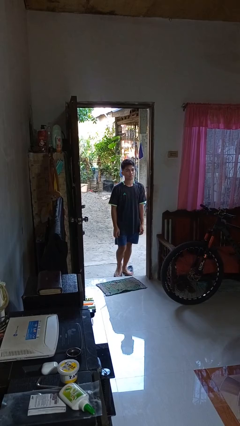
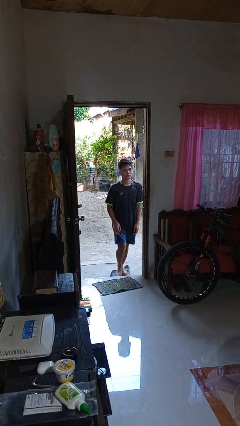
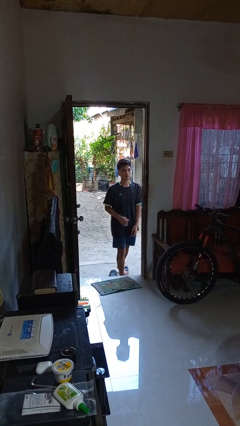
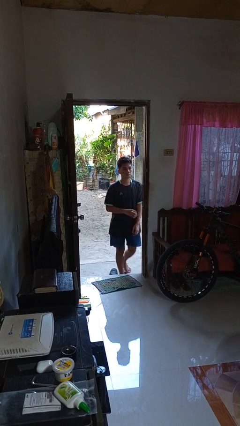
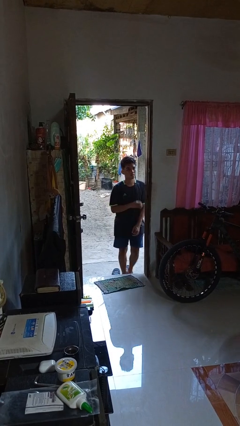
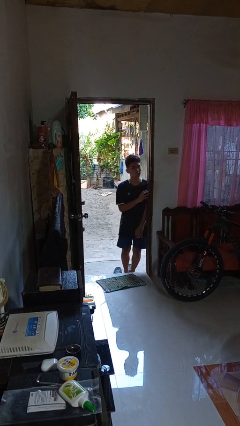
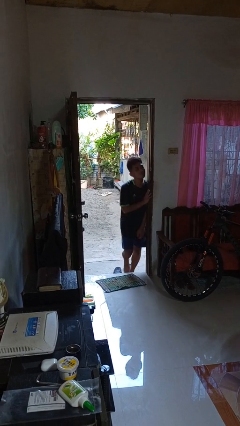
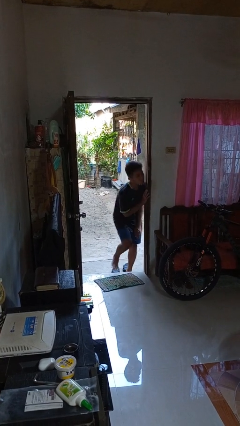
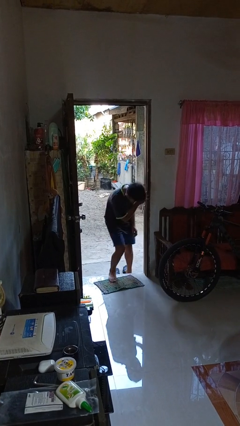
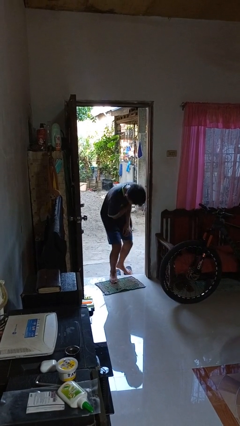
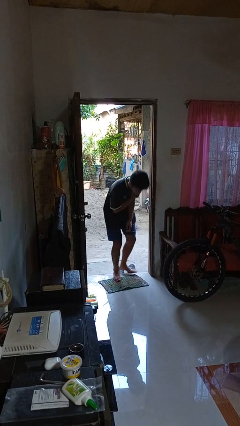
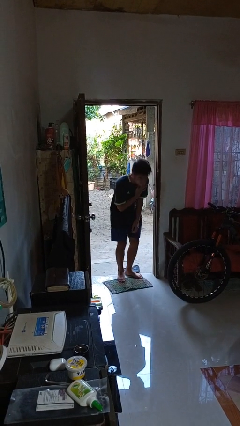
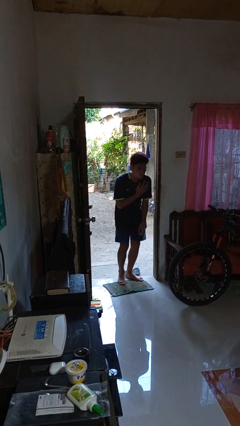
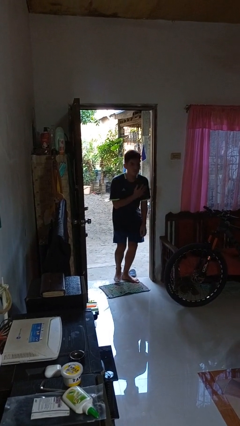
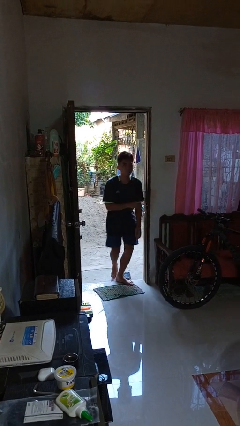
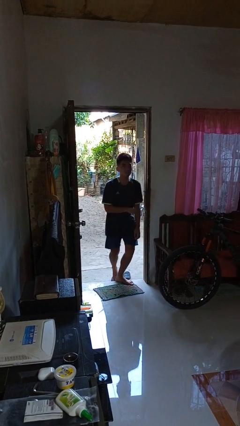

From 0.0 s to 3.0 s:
person bumps into wall

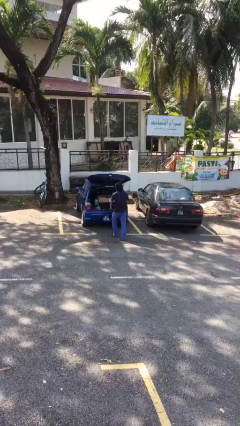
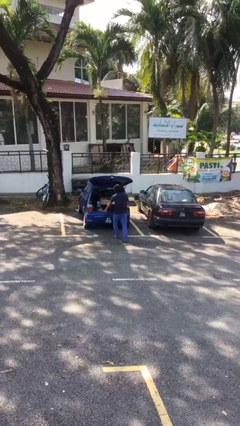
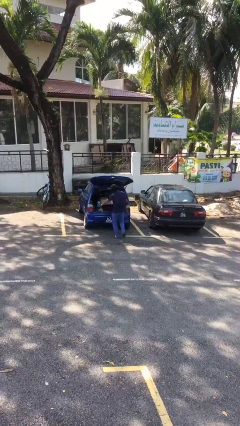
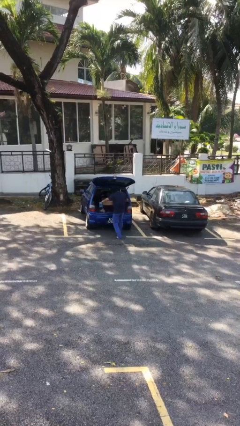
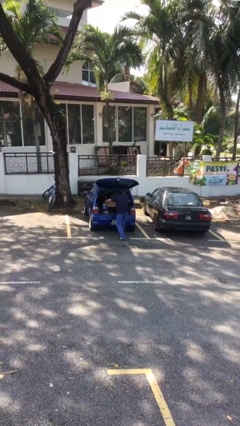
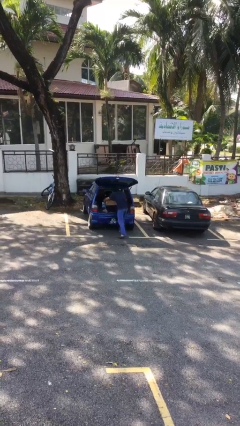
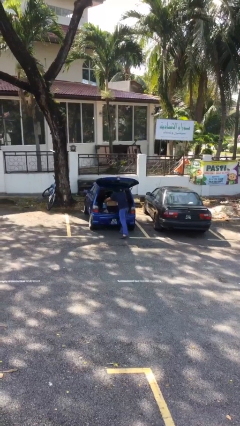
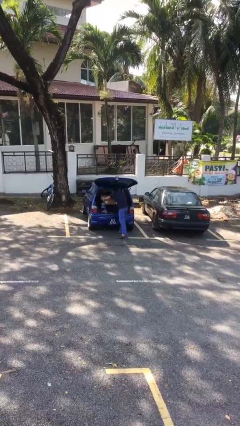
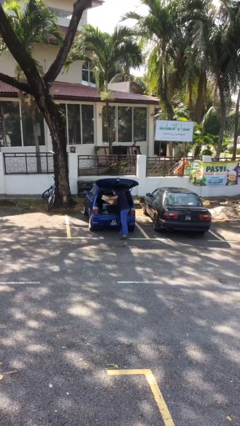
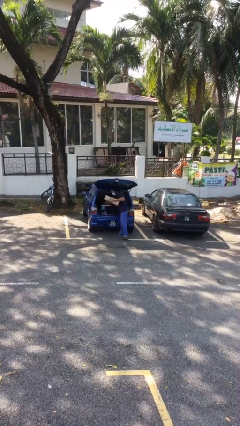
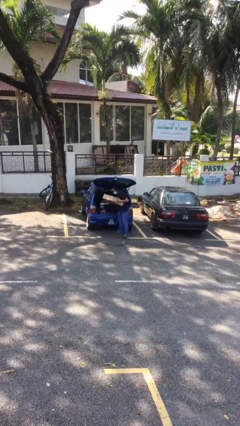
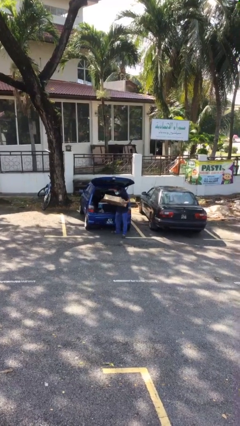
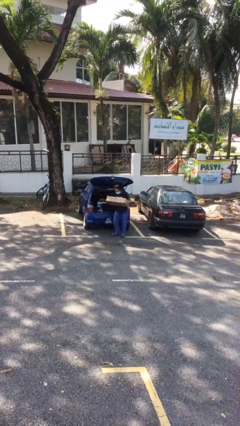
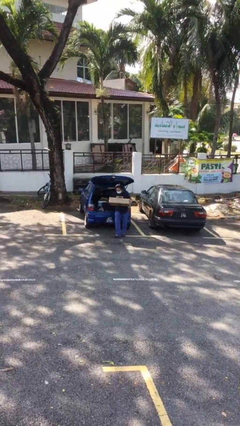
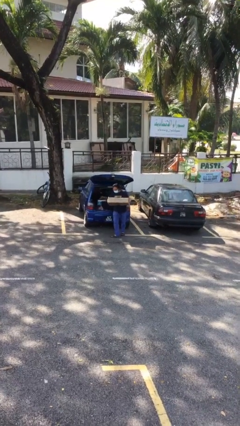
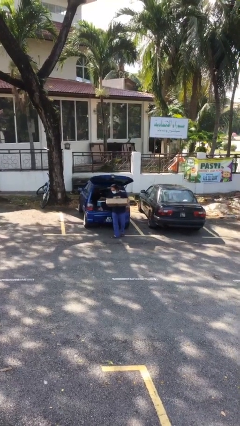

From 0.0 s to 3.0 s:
person unloads car

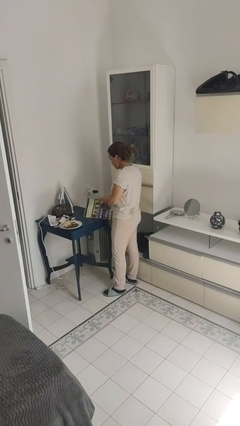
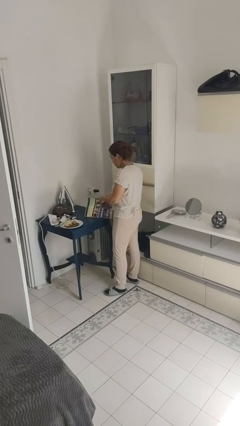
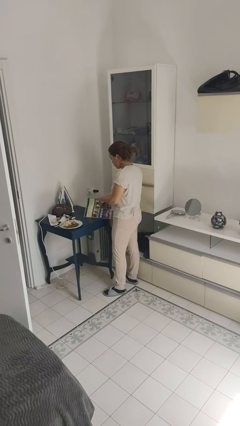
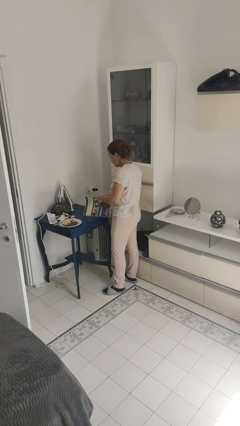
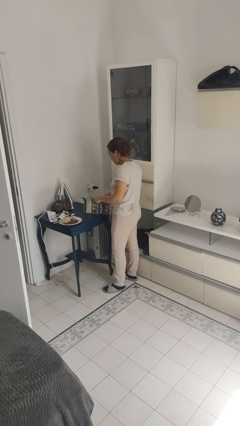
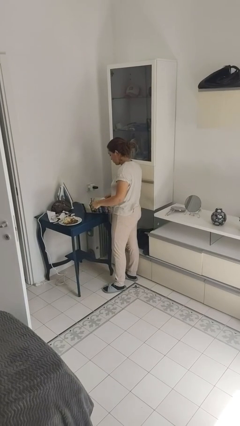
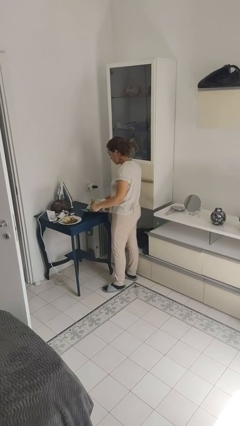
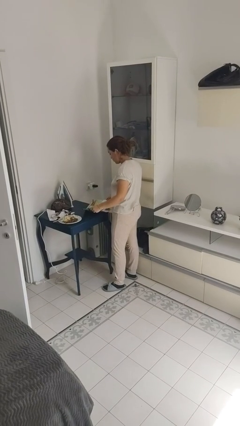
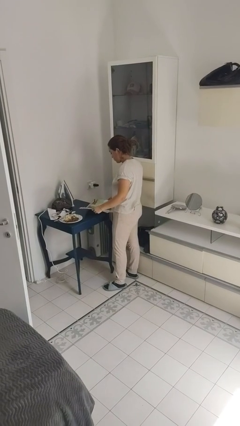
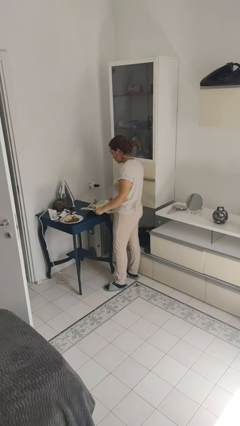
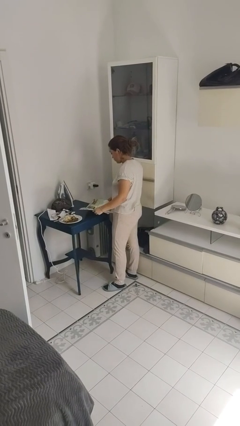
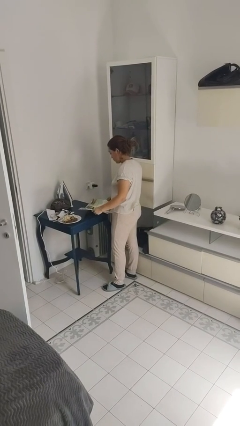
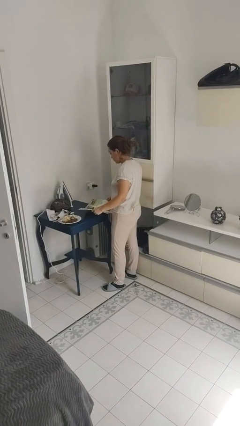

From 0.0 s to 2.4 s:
person reads magazine

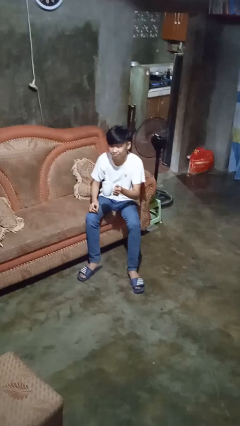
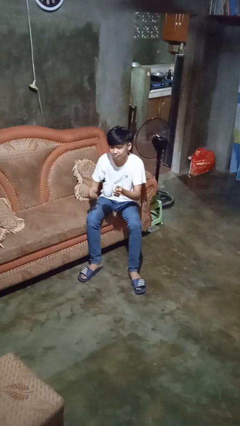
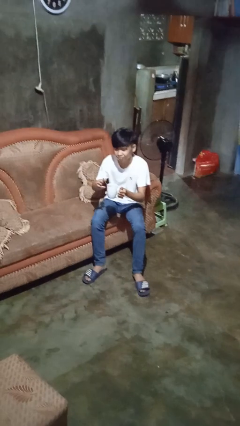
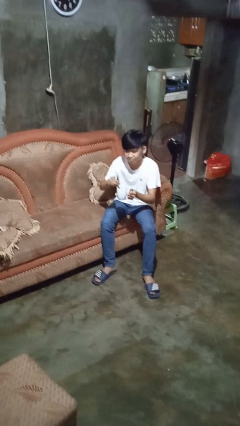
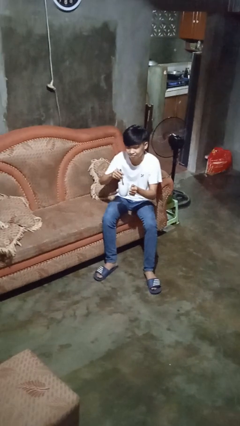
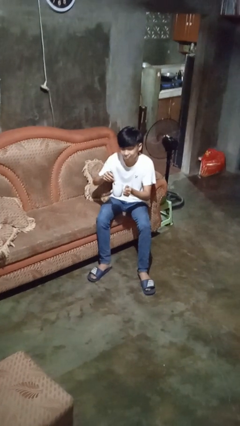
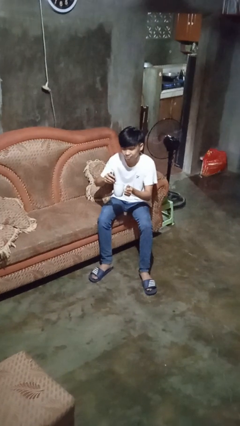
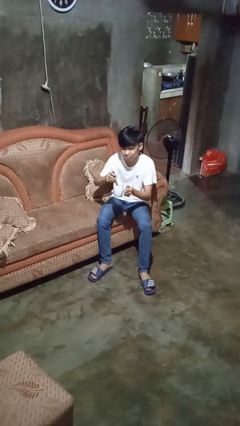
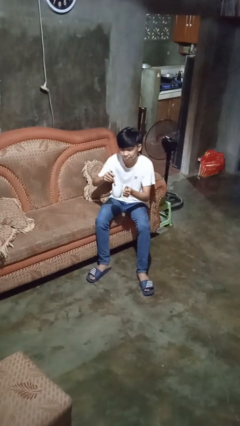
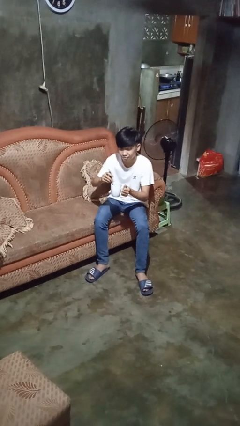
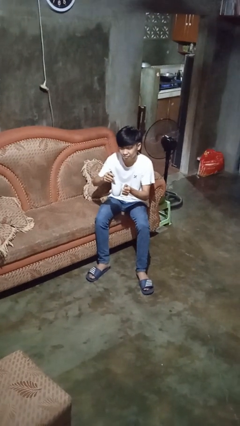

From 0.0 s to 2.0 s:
person stirs mug

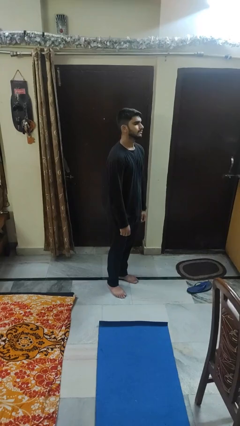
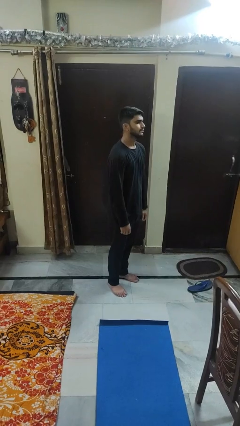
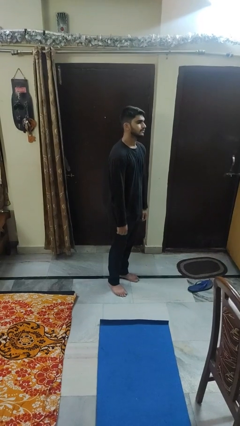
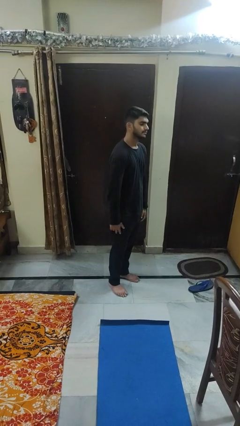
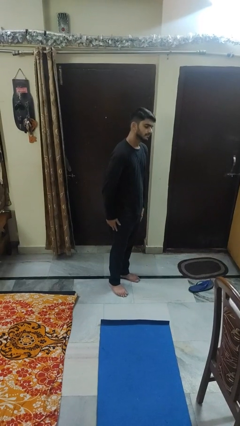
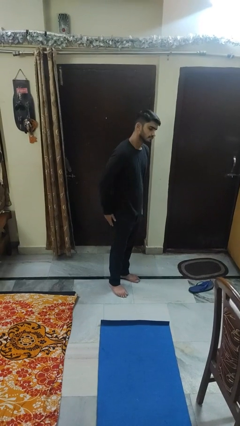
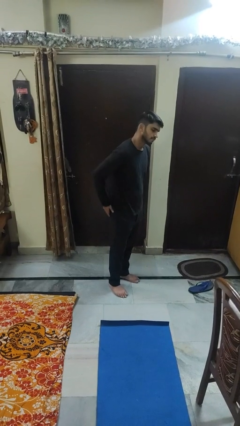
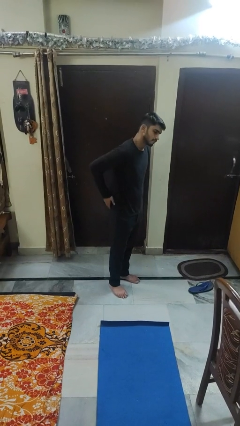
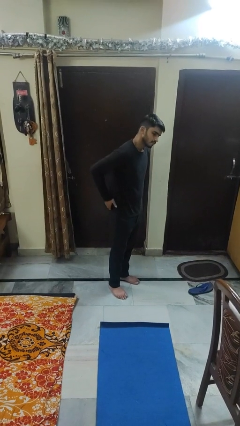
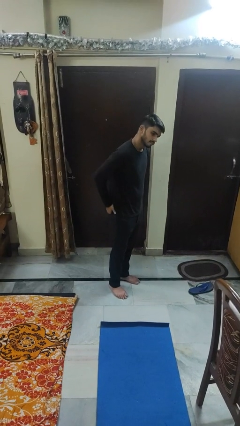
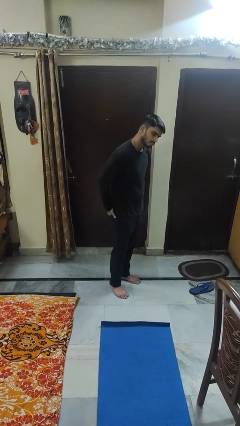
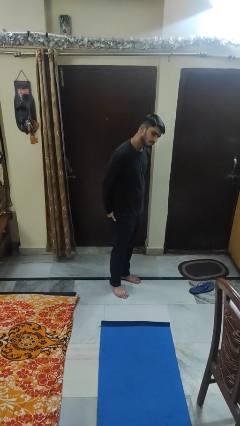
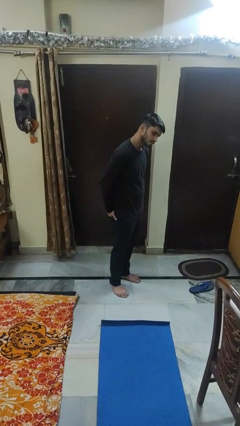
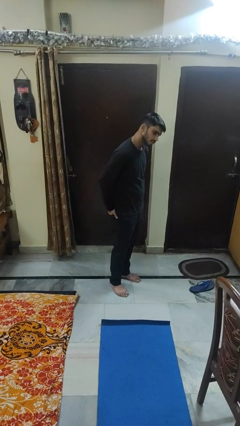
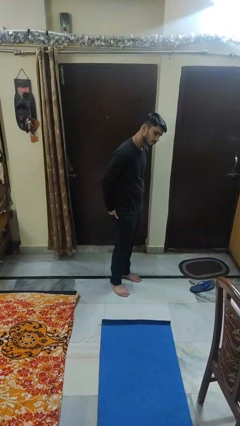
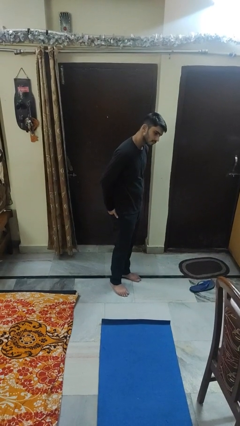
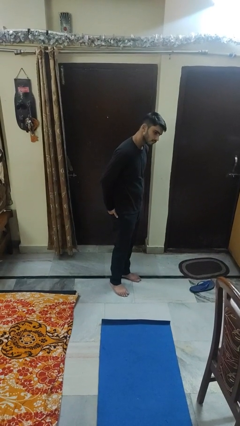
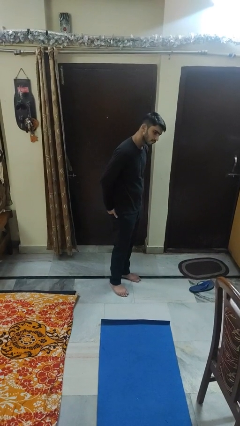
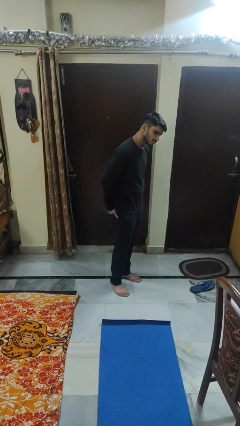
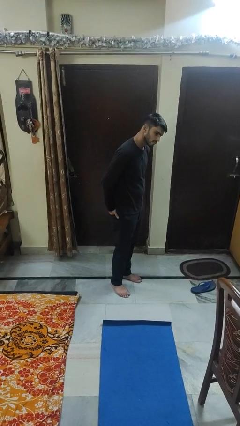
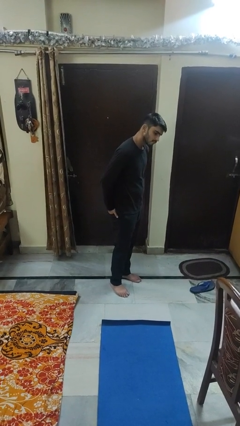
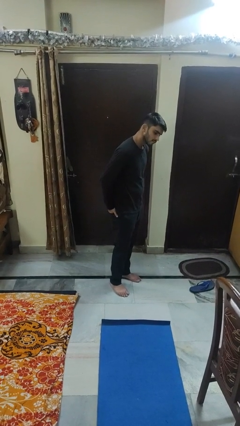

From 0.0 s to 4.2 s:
person puts hands in back pockets

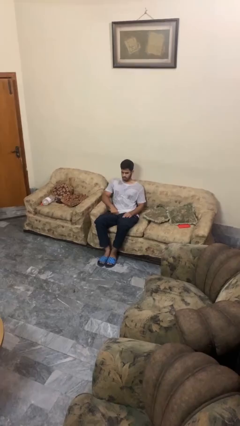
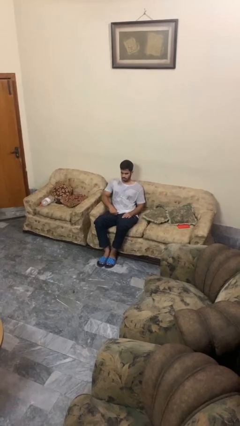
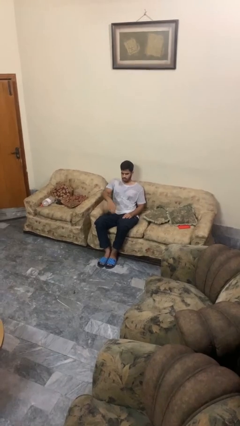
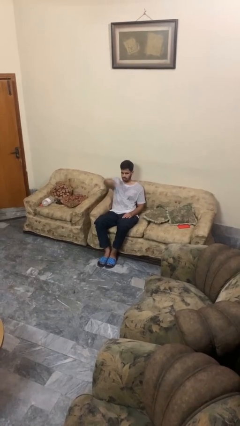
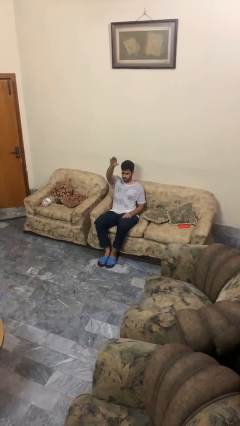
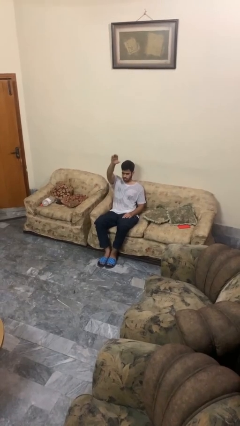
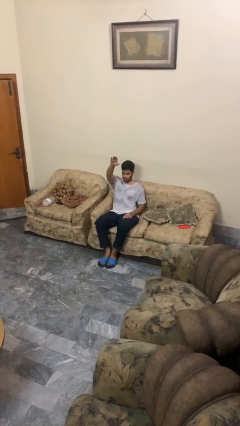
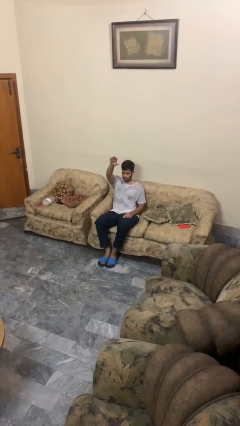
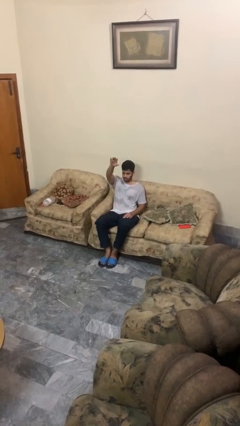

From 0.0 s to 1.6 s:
person gestures swipe up

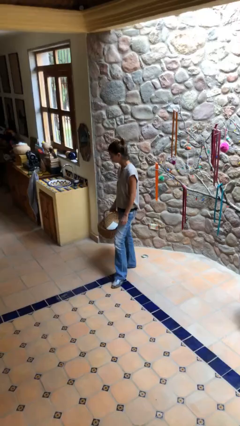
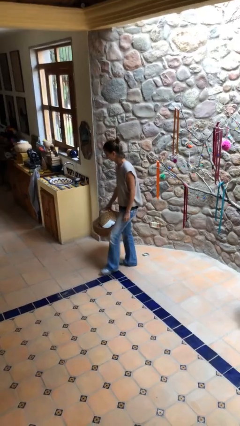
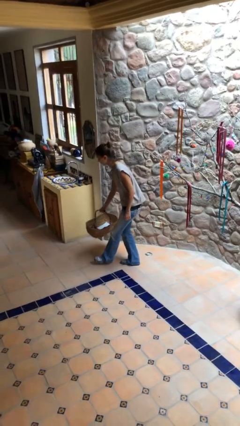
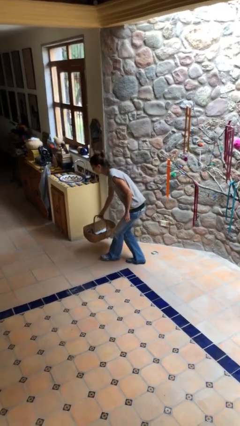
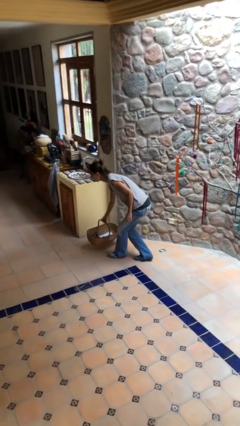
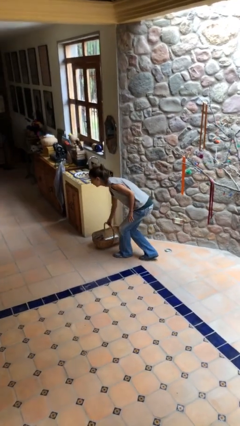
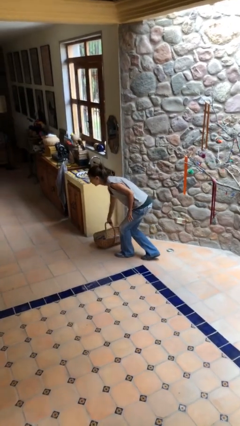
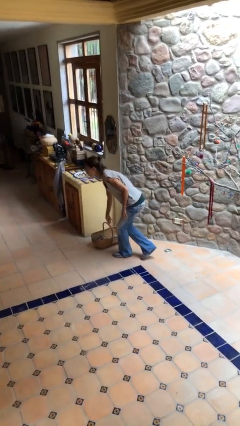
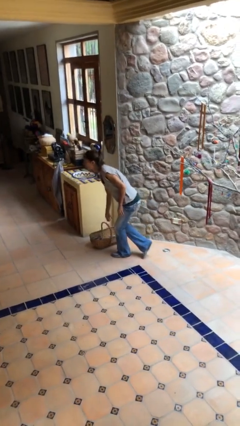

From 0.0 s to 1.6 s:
person puts down object on floor
